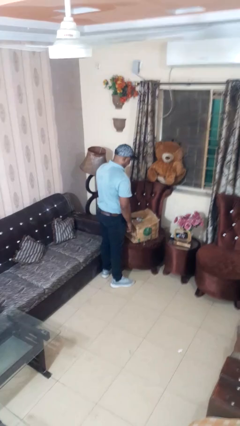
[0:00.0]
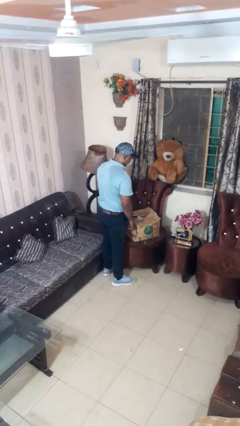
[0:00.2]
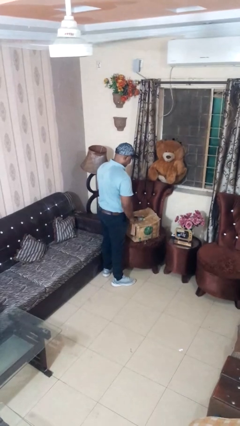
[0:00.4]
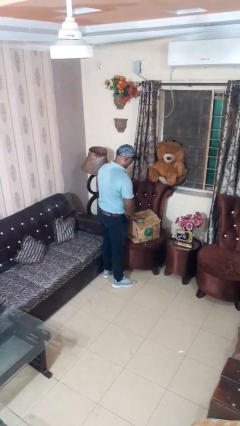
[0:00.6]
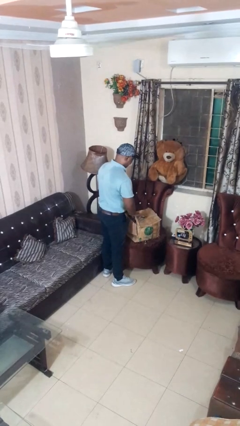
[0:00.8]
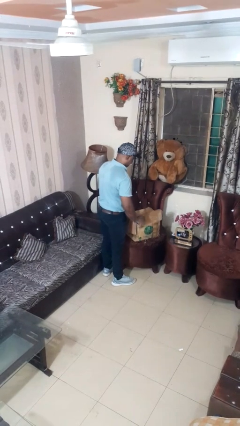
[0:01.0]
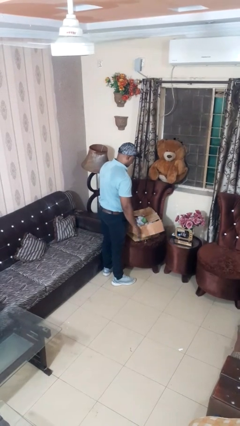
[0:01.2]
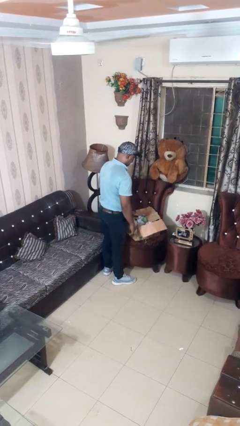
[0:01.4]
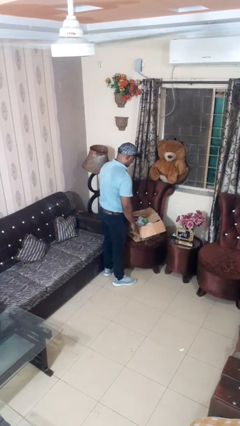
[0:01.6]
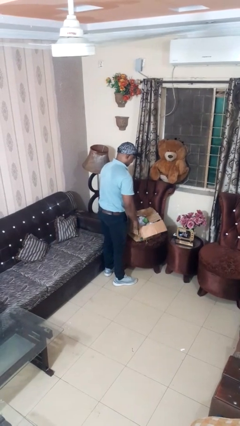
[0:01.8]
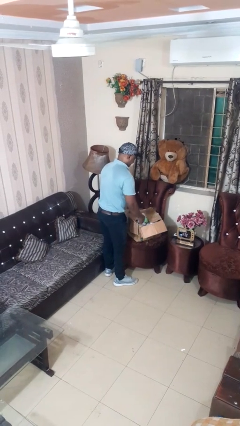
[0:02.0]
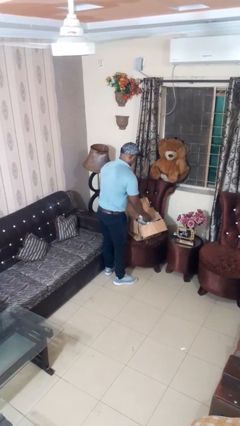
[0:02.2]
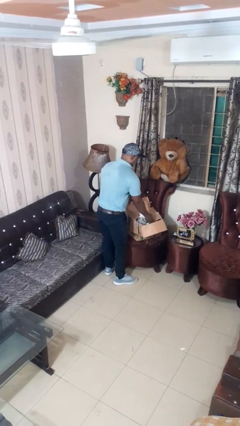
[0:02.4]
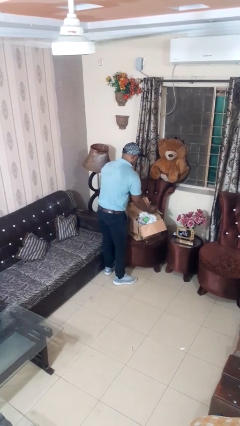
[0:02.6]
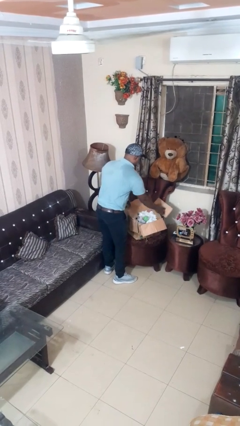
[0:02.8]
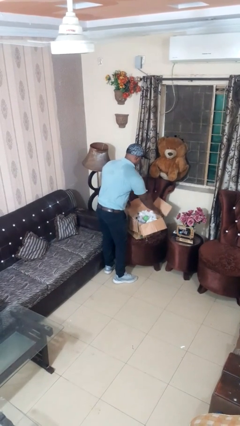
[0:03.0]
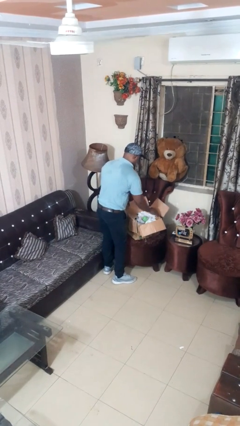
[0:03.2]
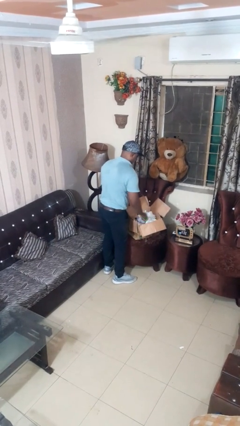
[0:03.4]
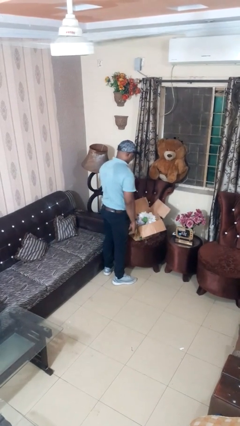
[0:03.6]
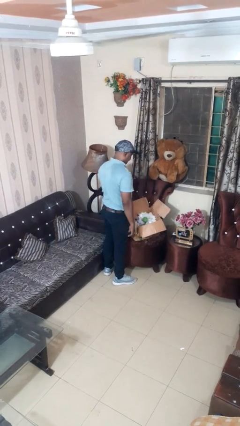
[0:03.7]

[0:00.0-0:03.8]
person opens box

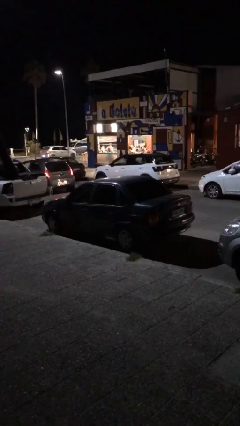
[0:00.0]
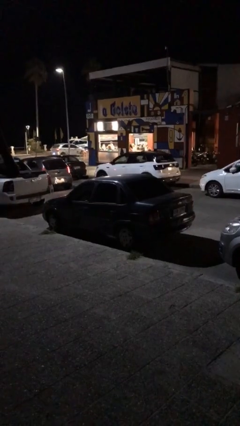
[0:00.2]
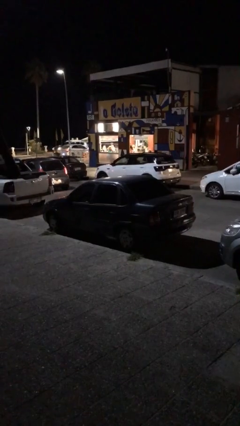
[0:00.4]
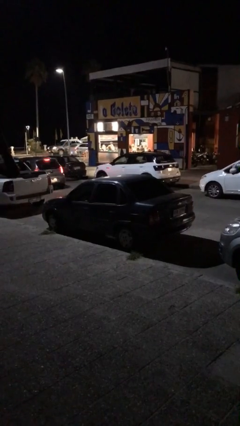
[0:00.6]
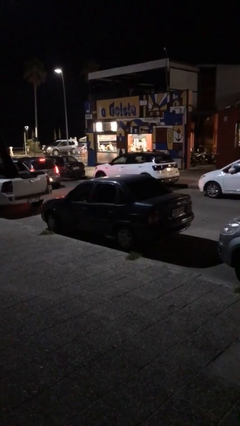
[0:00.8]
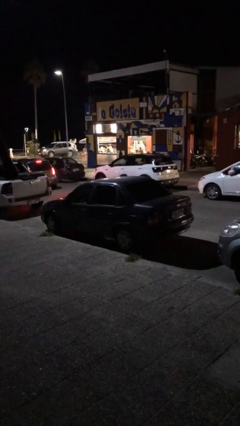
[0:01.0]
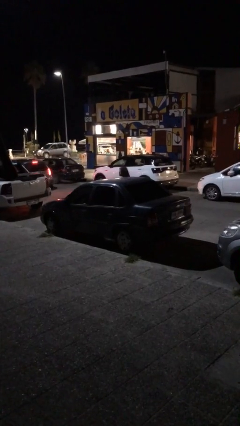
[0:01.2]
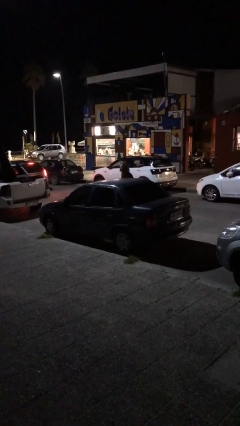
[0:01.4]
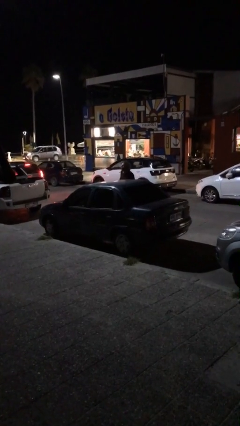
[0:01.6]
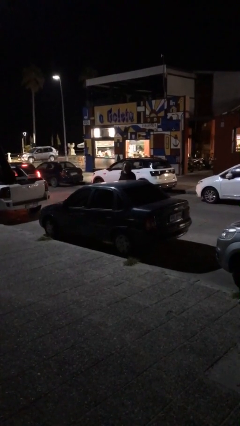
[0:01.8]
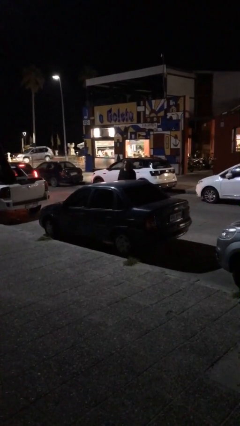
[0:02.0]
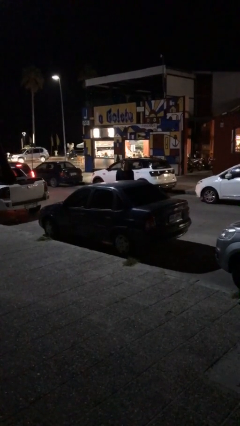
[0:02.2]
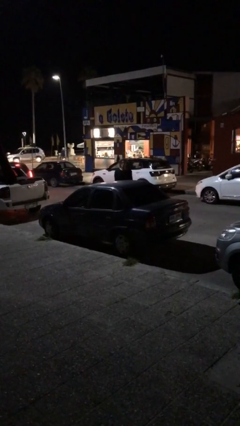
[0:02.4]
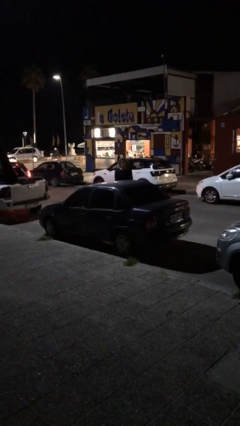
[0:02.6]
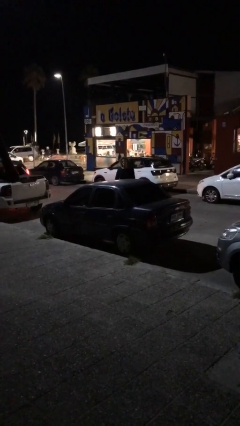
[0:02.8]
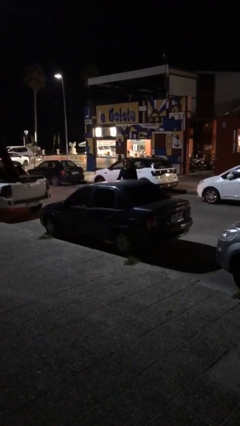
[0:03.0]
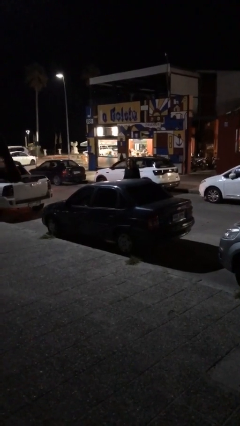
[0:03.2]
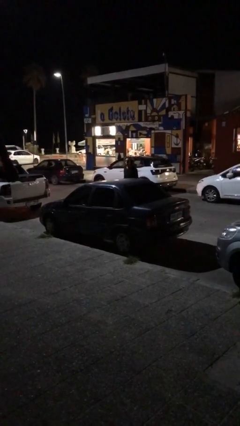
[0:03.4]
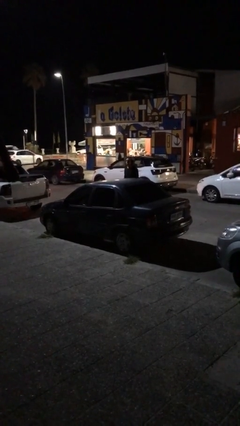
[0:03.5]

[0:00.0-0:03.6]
car drops off person

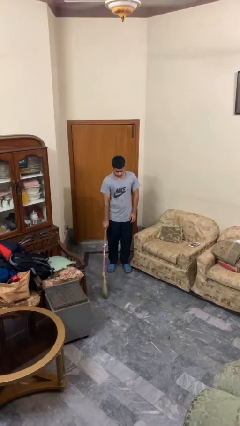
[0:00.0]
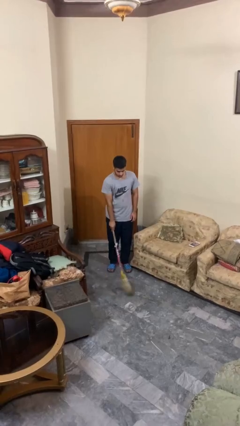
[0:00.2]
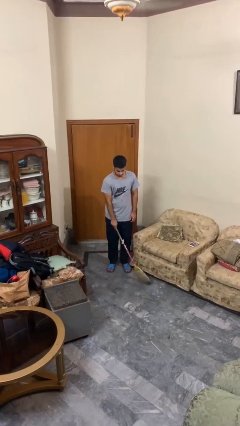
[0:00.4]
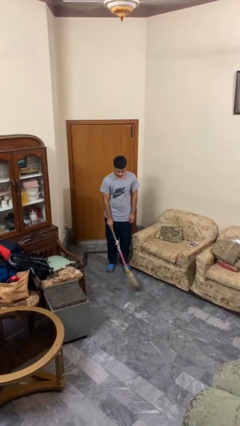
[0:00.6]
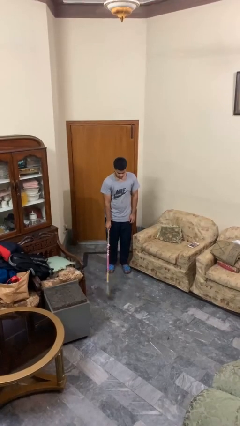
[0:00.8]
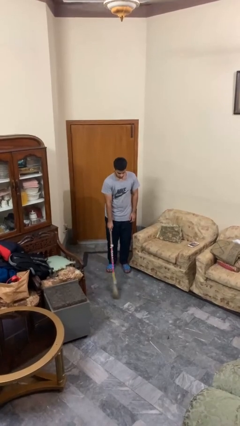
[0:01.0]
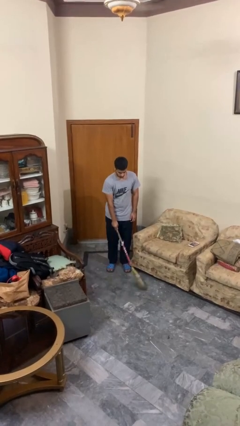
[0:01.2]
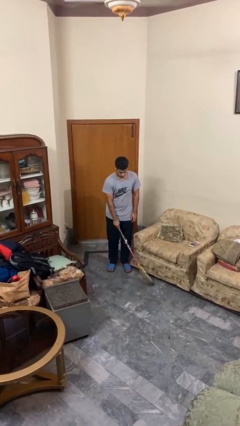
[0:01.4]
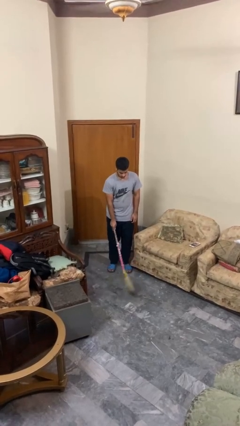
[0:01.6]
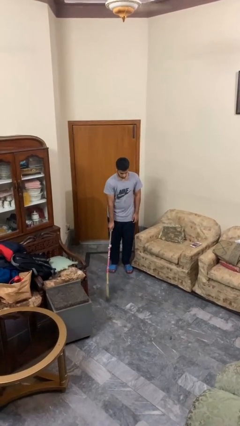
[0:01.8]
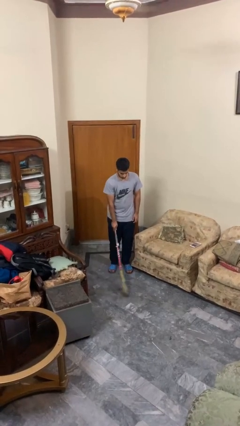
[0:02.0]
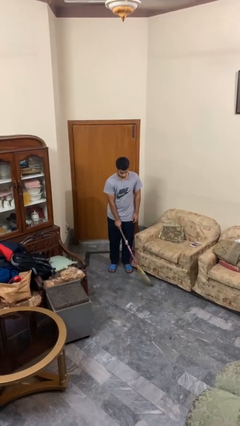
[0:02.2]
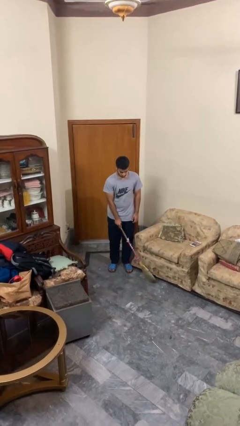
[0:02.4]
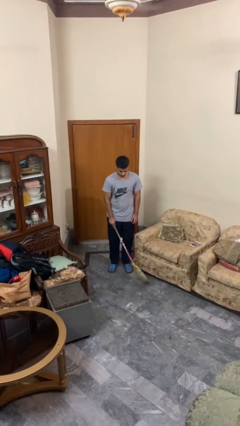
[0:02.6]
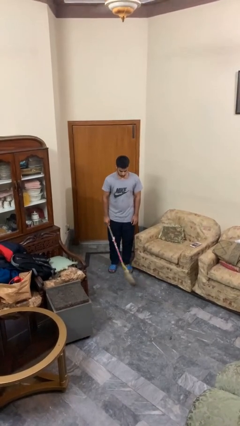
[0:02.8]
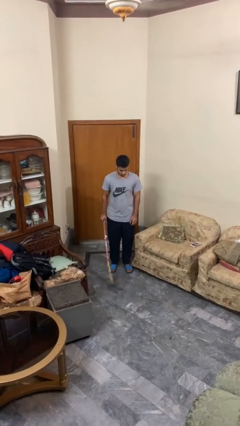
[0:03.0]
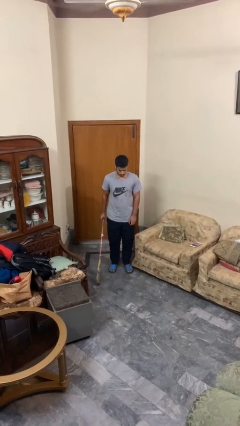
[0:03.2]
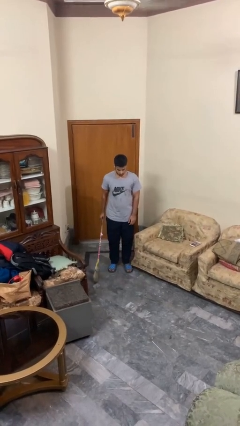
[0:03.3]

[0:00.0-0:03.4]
person sweeps floor

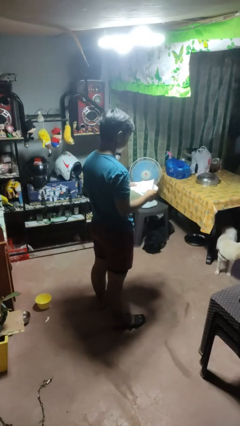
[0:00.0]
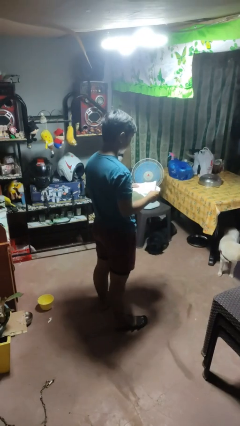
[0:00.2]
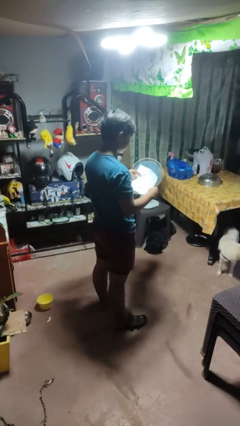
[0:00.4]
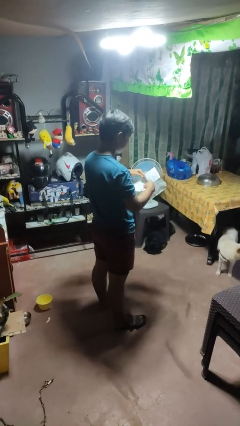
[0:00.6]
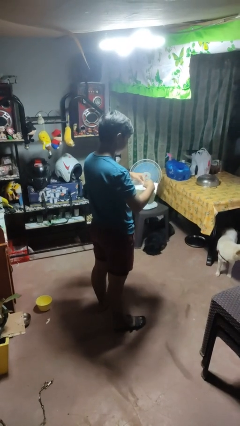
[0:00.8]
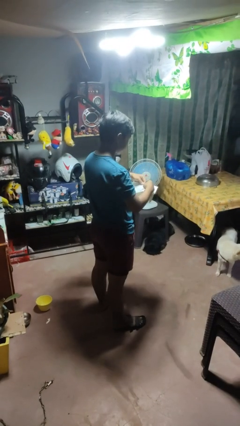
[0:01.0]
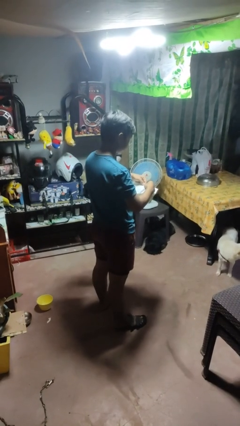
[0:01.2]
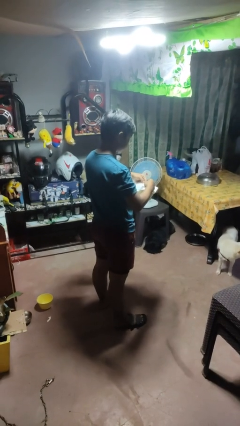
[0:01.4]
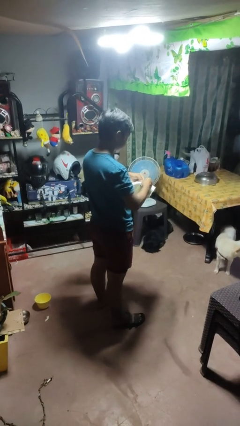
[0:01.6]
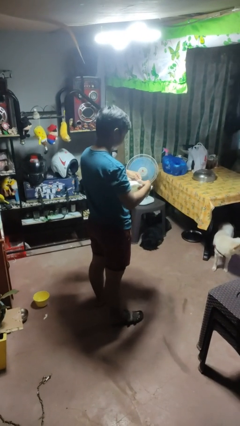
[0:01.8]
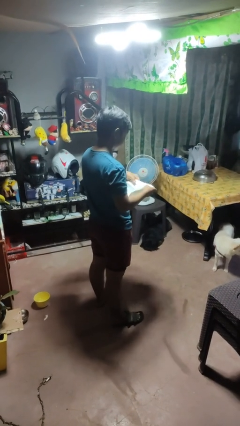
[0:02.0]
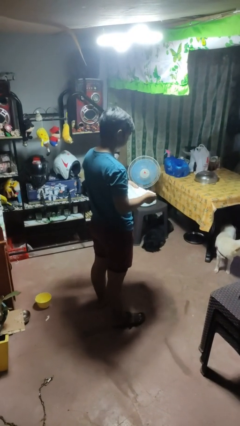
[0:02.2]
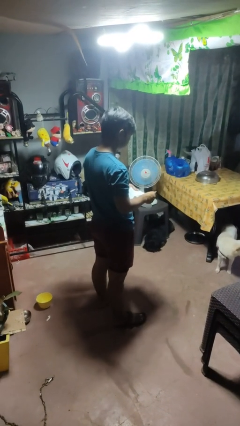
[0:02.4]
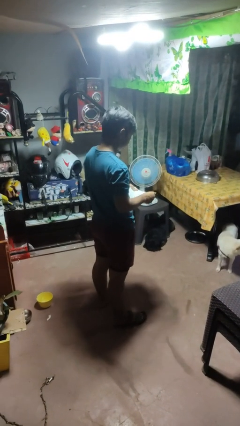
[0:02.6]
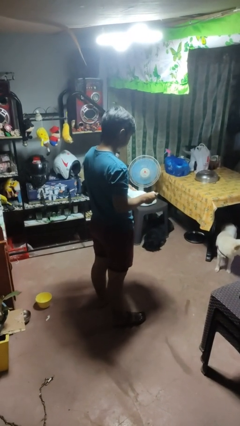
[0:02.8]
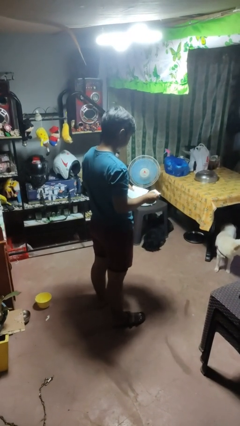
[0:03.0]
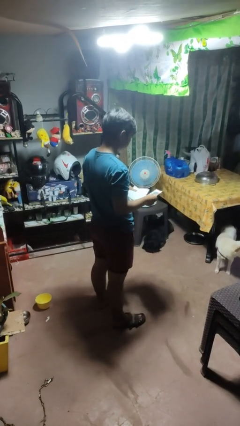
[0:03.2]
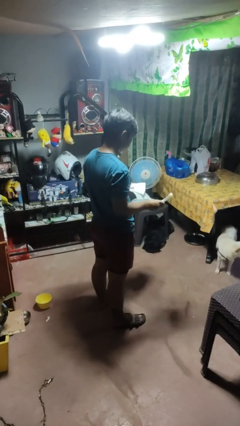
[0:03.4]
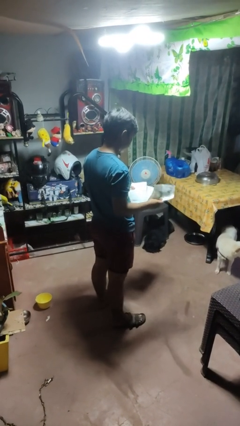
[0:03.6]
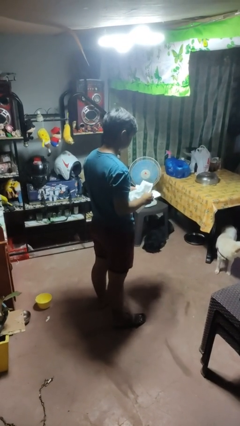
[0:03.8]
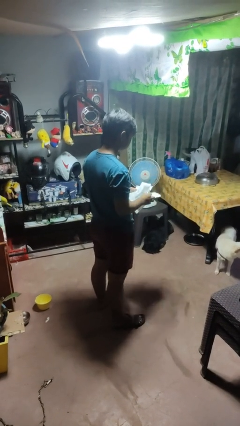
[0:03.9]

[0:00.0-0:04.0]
person tears paper

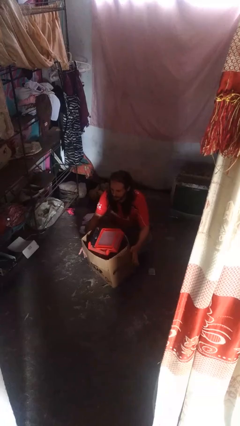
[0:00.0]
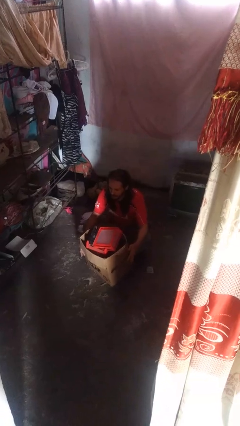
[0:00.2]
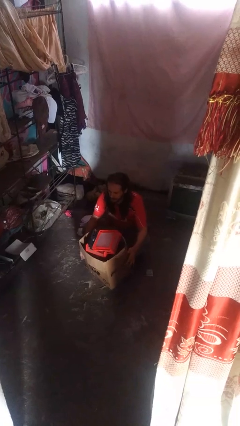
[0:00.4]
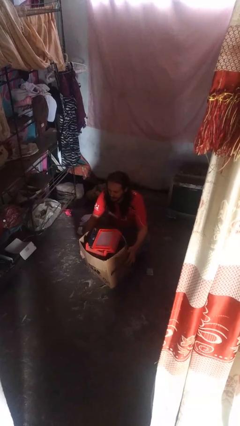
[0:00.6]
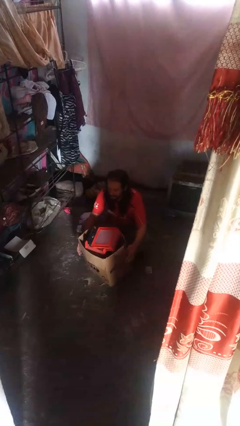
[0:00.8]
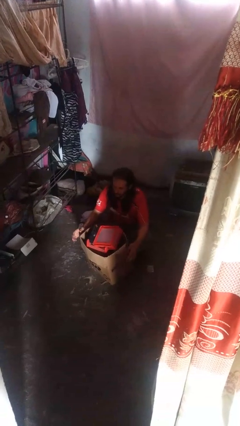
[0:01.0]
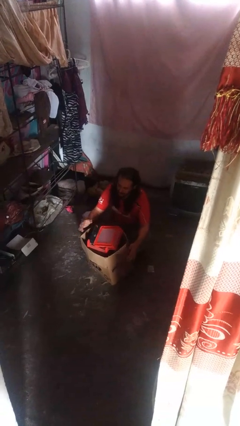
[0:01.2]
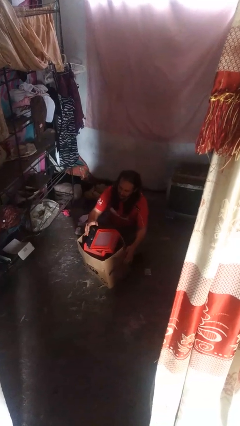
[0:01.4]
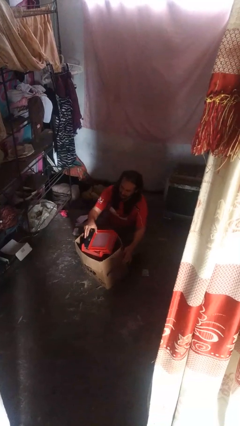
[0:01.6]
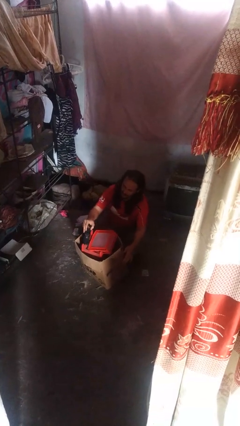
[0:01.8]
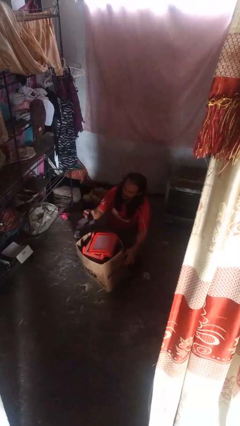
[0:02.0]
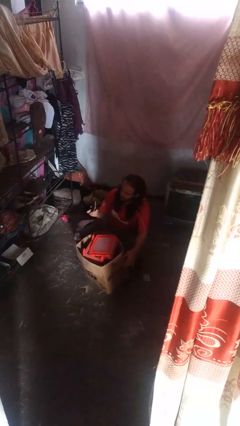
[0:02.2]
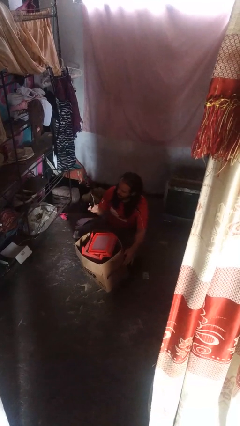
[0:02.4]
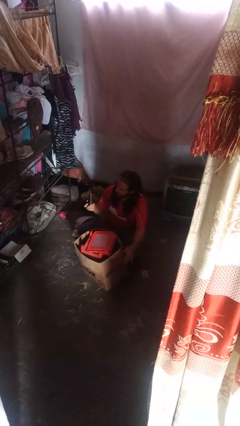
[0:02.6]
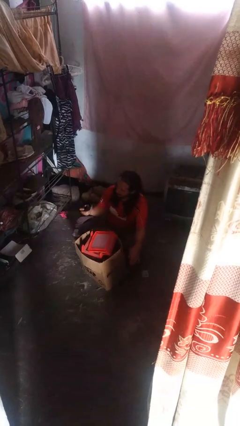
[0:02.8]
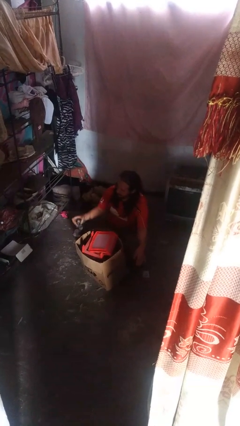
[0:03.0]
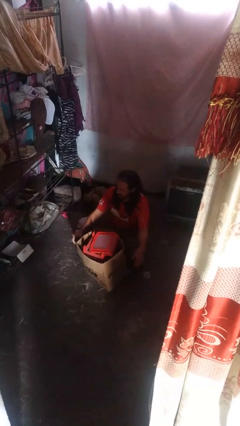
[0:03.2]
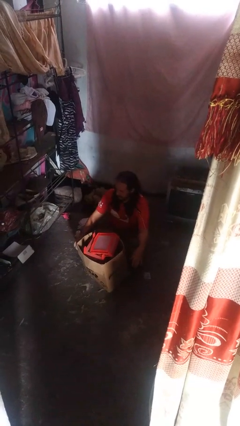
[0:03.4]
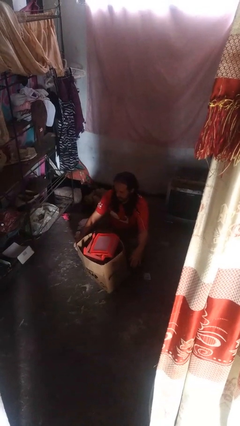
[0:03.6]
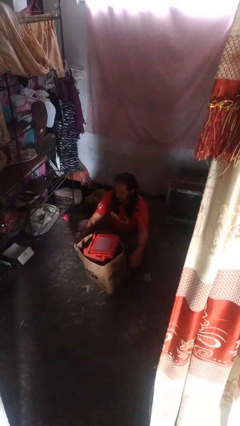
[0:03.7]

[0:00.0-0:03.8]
person takes object from box
